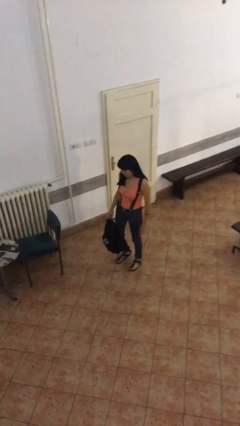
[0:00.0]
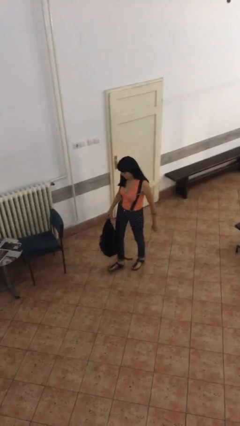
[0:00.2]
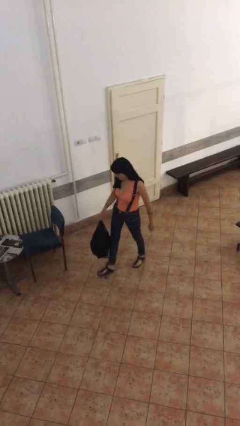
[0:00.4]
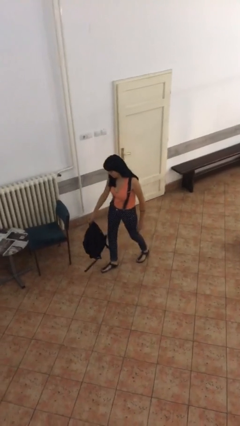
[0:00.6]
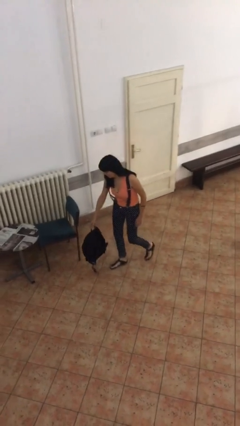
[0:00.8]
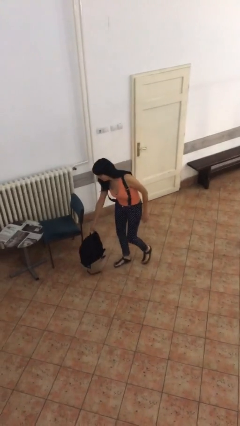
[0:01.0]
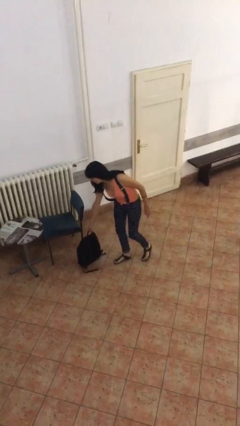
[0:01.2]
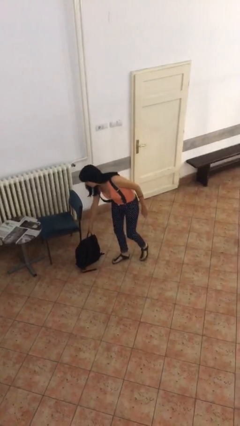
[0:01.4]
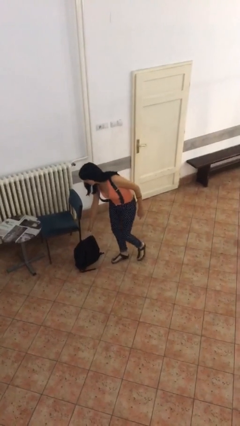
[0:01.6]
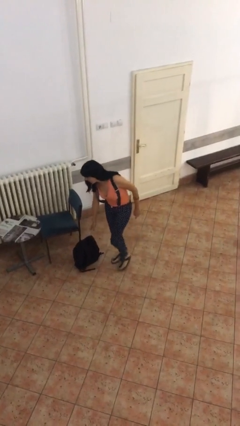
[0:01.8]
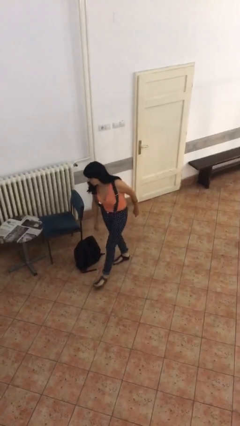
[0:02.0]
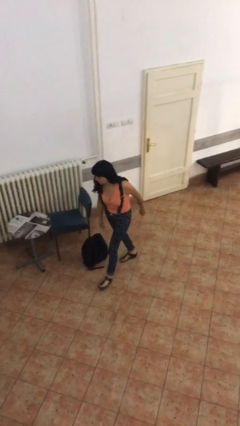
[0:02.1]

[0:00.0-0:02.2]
person puts down object on floor

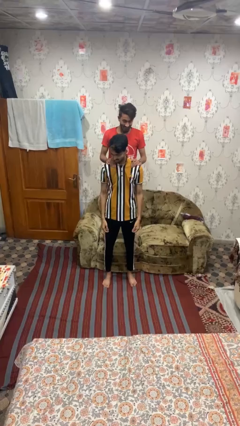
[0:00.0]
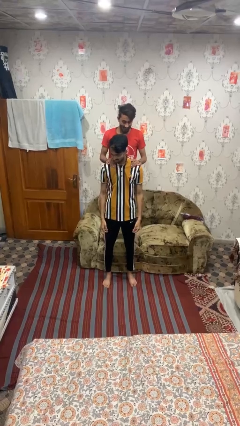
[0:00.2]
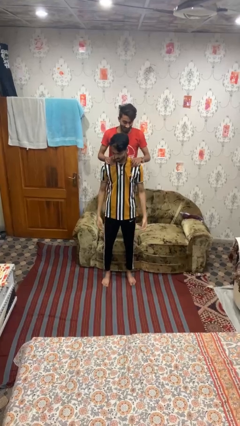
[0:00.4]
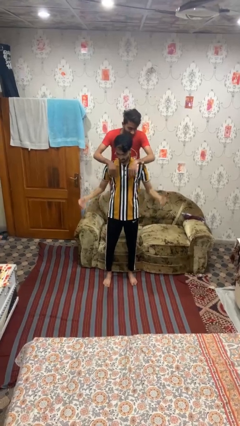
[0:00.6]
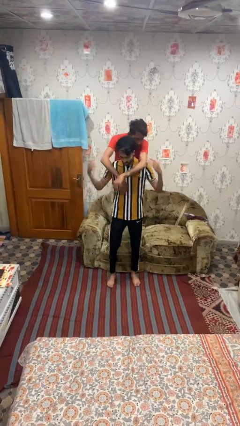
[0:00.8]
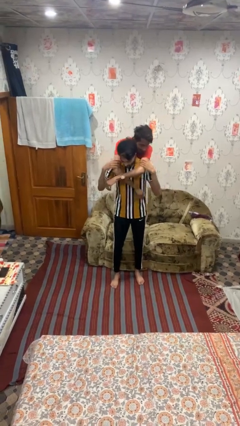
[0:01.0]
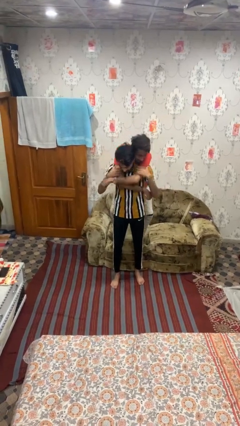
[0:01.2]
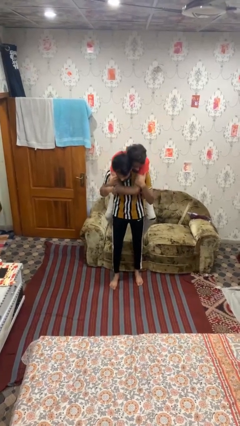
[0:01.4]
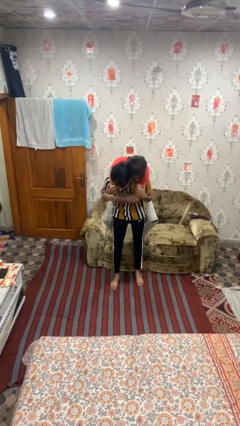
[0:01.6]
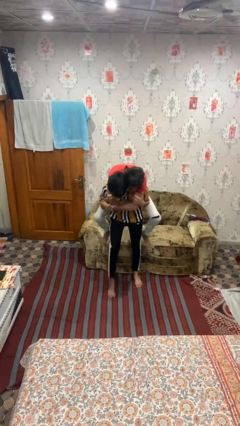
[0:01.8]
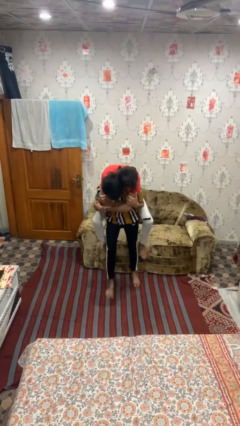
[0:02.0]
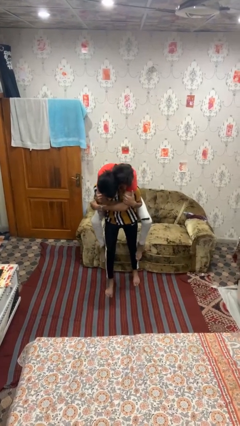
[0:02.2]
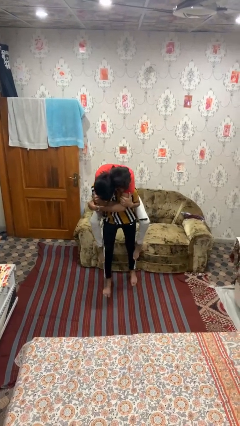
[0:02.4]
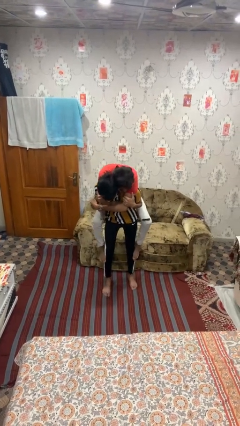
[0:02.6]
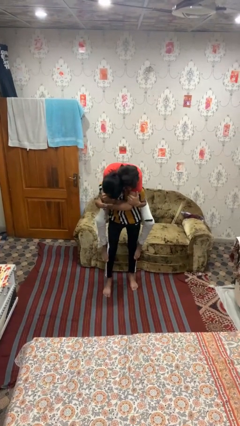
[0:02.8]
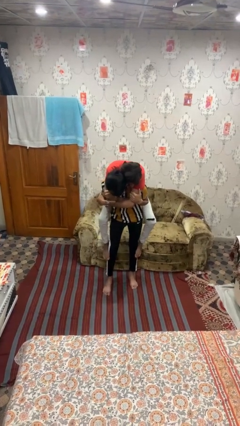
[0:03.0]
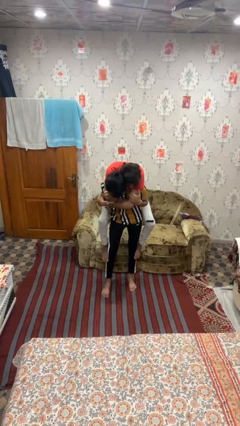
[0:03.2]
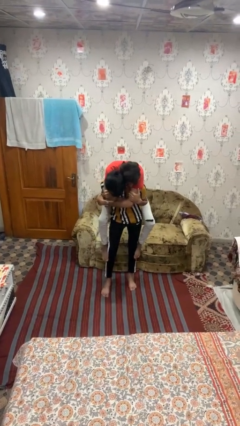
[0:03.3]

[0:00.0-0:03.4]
person carries person on back

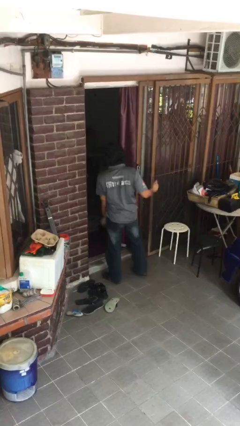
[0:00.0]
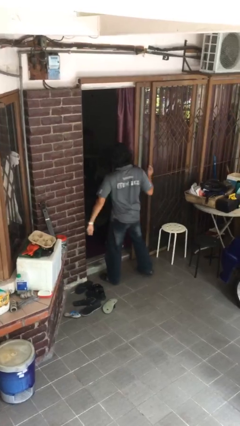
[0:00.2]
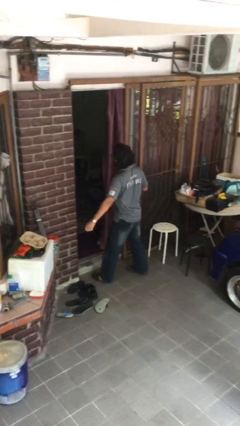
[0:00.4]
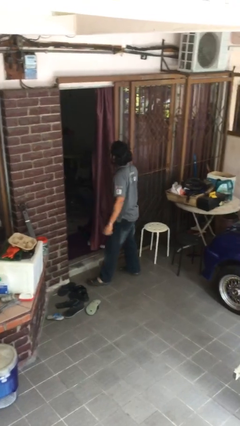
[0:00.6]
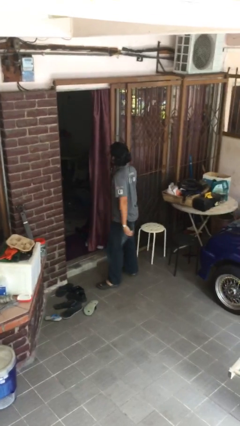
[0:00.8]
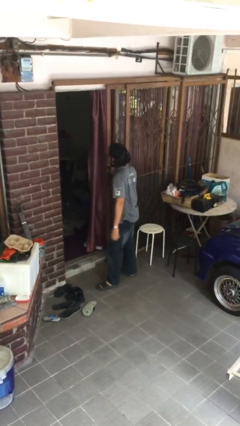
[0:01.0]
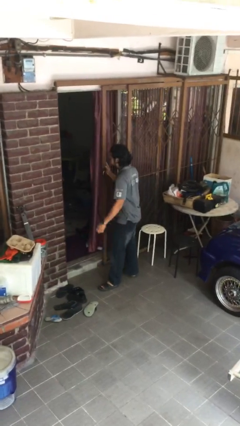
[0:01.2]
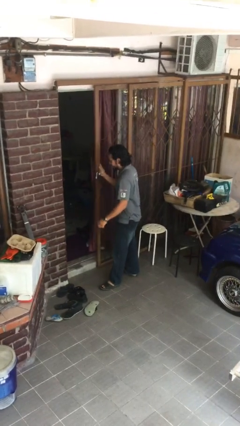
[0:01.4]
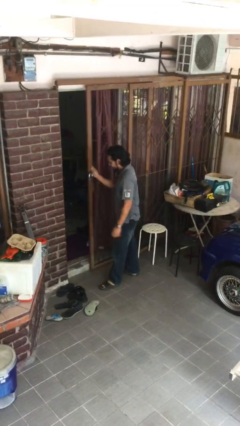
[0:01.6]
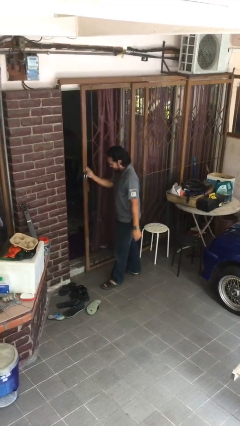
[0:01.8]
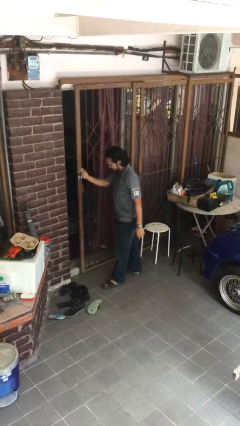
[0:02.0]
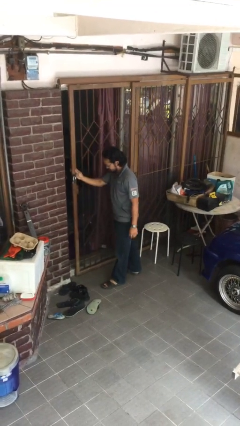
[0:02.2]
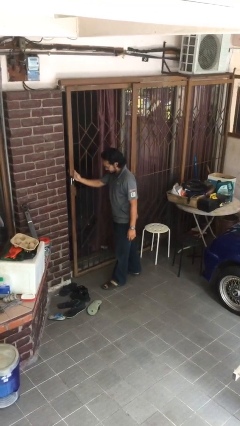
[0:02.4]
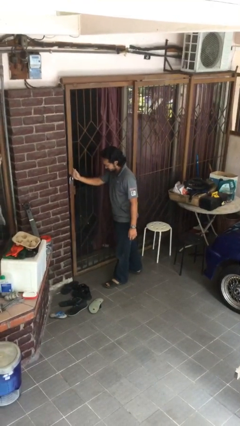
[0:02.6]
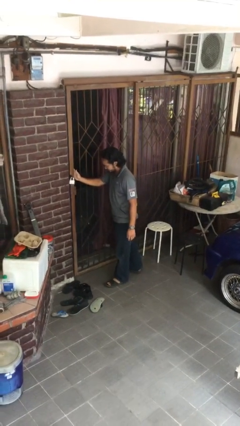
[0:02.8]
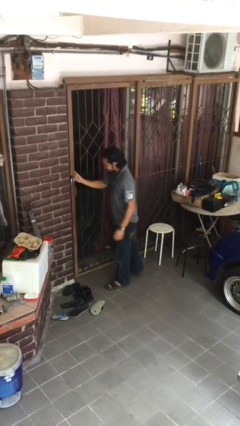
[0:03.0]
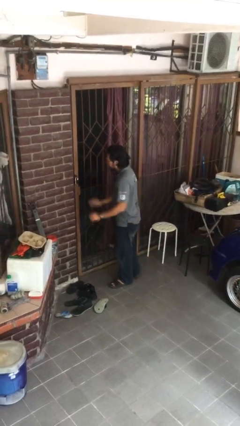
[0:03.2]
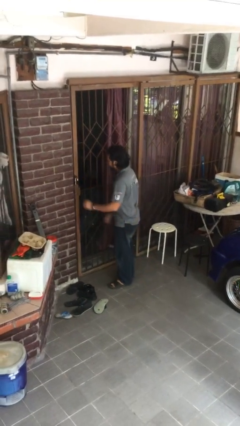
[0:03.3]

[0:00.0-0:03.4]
person closes facility door

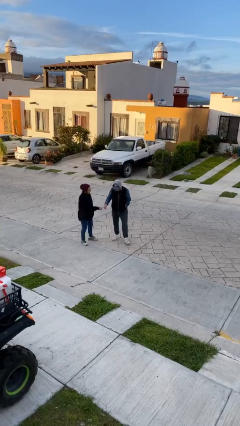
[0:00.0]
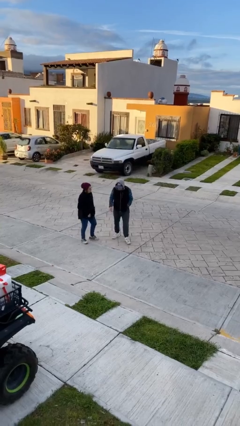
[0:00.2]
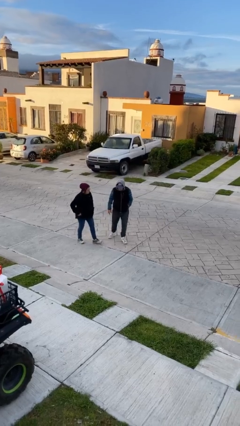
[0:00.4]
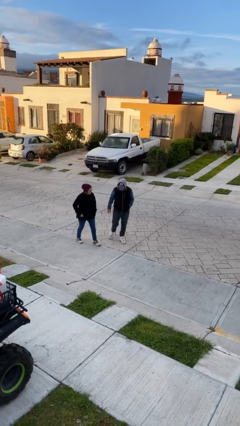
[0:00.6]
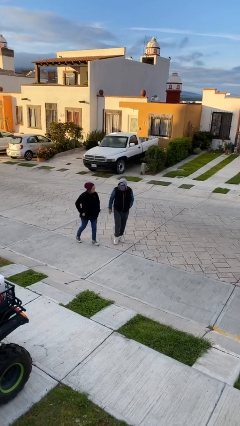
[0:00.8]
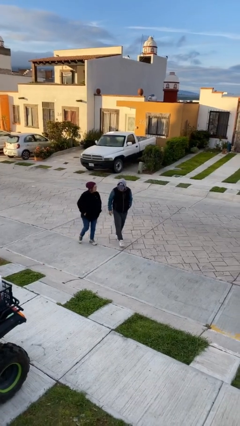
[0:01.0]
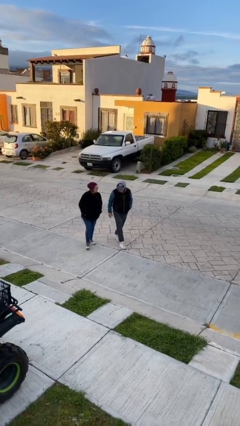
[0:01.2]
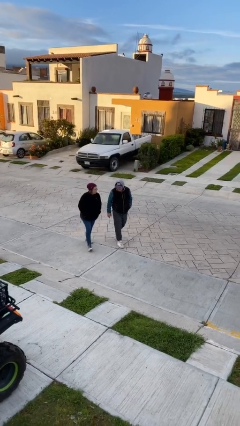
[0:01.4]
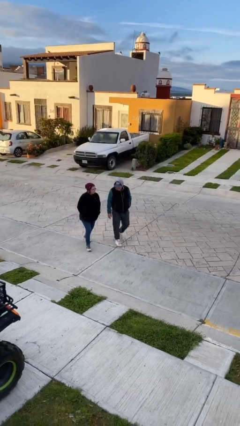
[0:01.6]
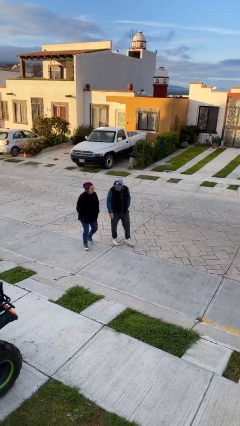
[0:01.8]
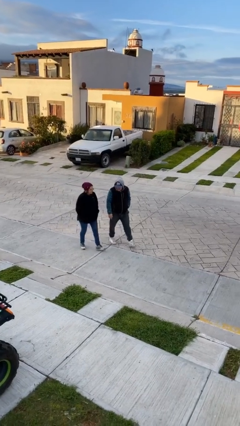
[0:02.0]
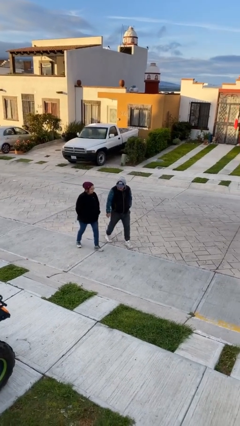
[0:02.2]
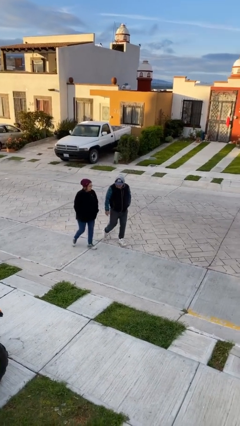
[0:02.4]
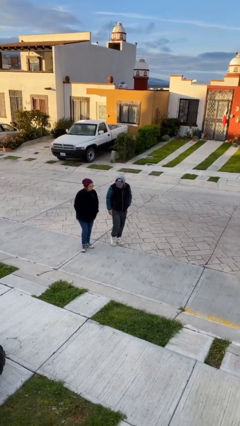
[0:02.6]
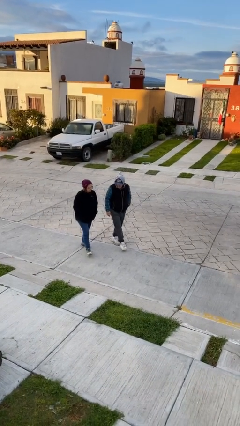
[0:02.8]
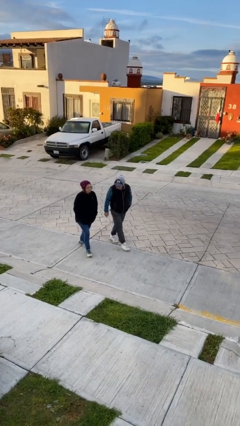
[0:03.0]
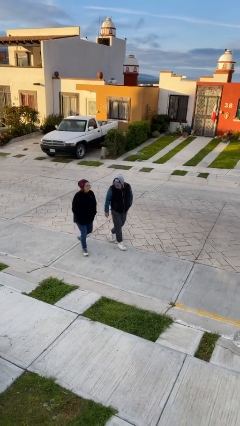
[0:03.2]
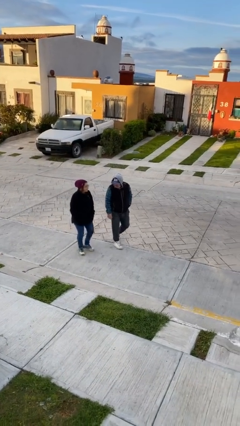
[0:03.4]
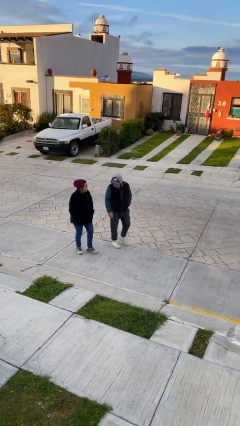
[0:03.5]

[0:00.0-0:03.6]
person talks to person

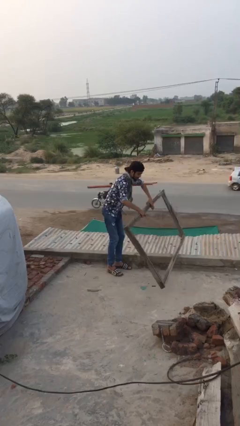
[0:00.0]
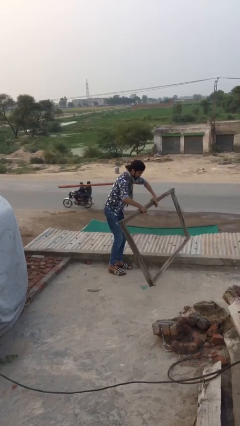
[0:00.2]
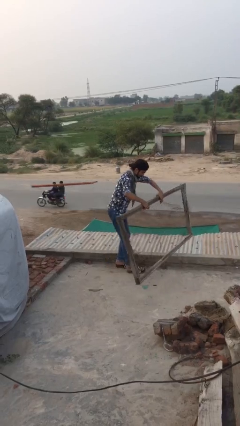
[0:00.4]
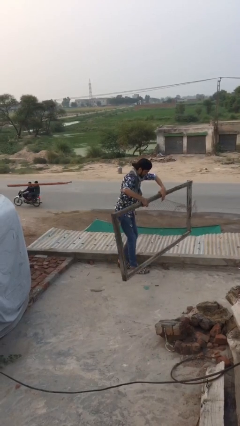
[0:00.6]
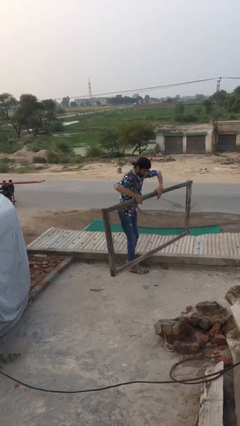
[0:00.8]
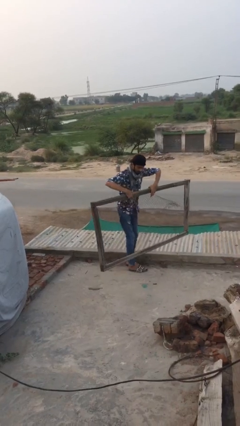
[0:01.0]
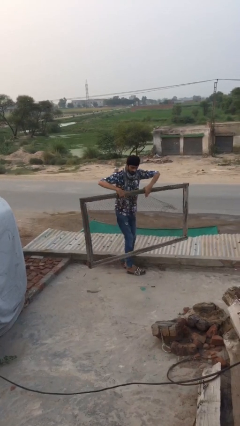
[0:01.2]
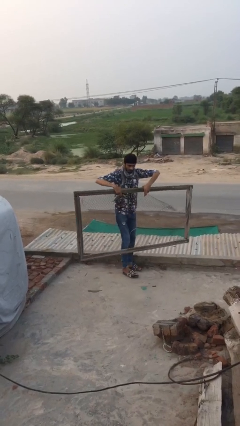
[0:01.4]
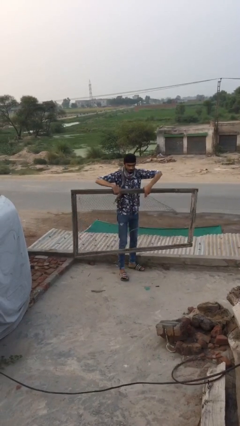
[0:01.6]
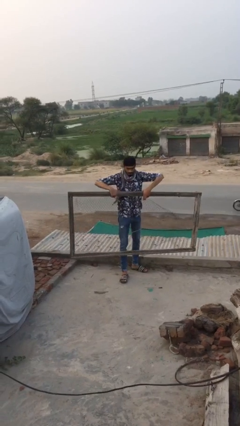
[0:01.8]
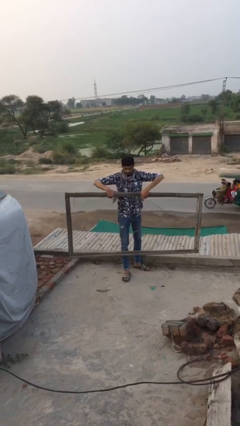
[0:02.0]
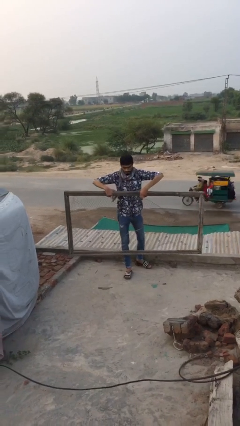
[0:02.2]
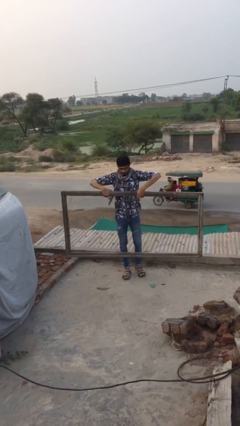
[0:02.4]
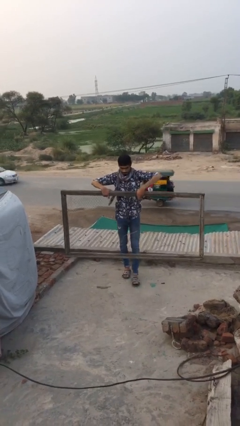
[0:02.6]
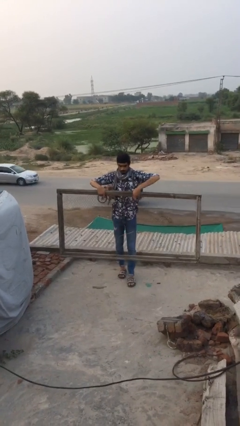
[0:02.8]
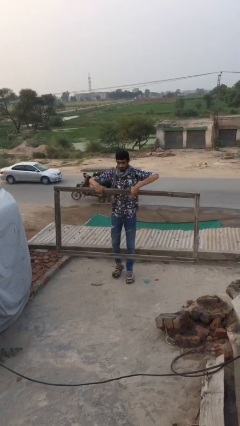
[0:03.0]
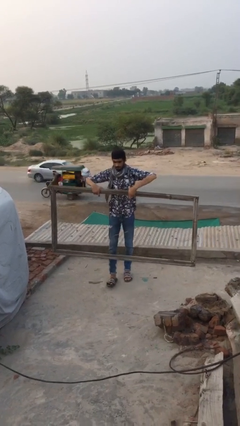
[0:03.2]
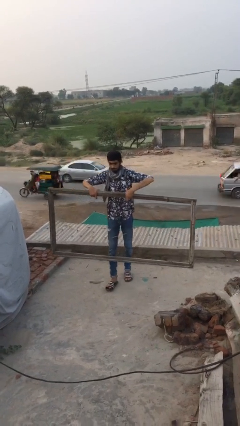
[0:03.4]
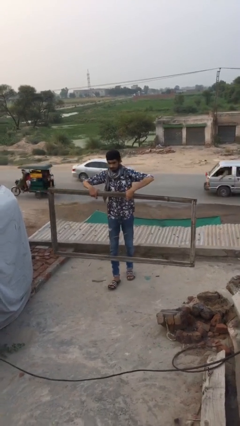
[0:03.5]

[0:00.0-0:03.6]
person carries heavy object

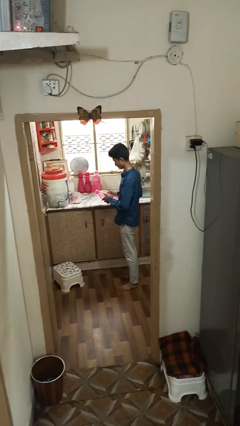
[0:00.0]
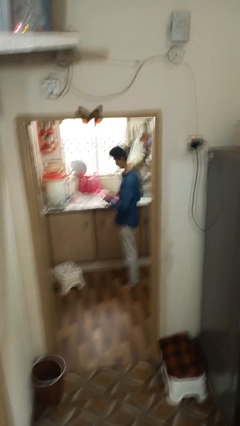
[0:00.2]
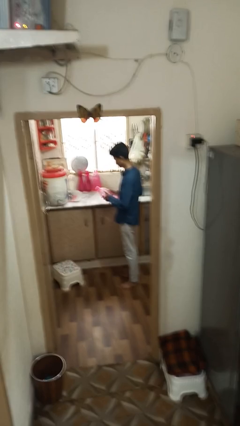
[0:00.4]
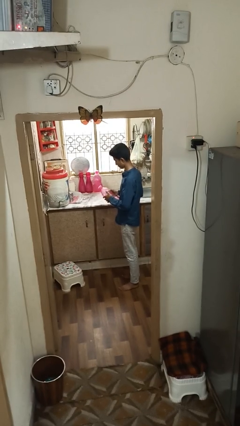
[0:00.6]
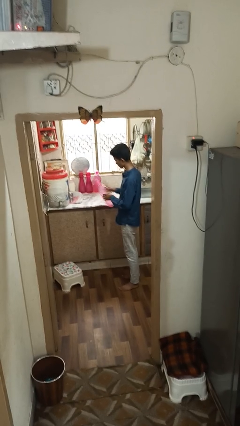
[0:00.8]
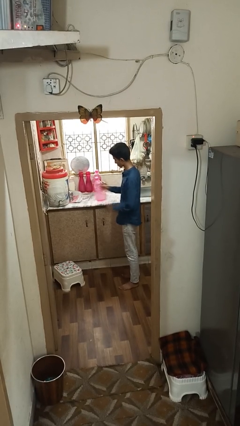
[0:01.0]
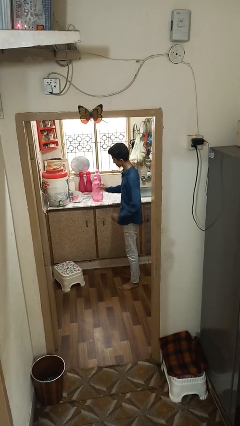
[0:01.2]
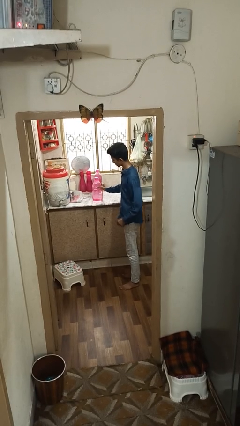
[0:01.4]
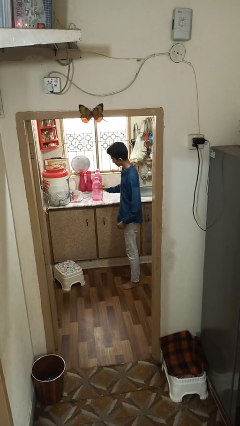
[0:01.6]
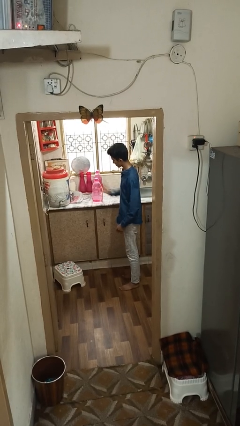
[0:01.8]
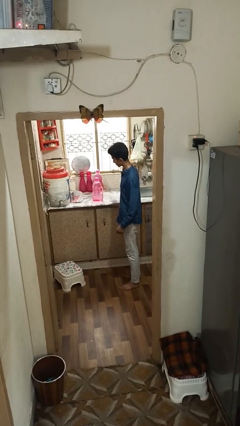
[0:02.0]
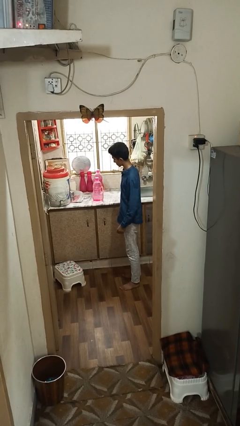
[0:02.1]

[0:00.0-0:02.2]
person puts down object on countertop
